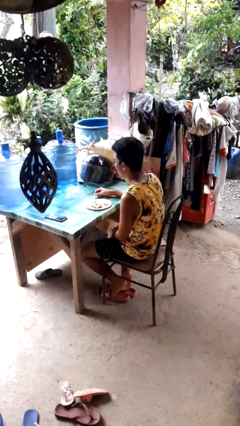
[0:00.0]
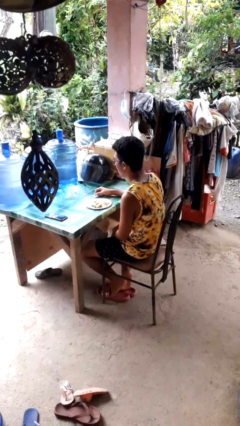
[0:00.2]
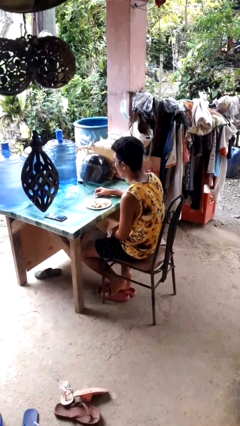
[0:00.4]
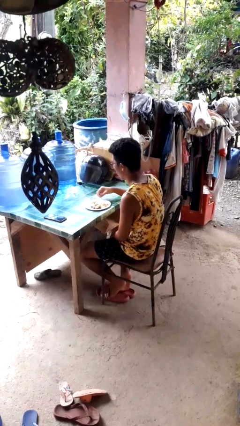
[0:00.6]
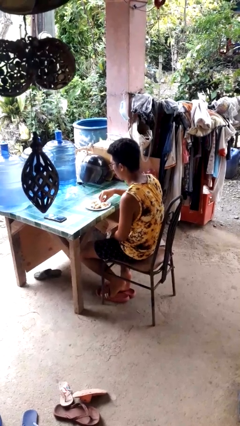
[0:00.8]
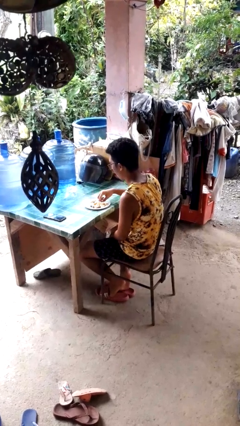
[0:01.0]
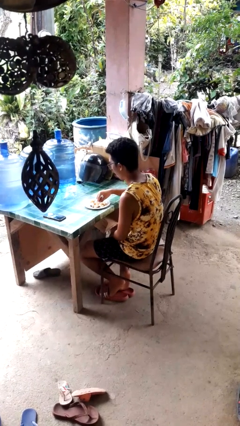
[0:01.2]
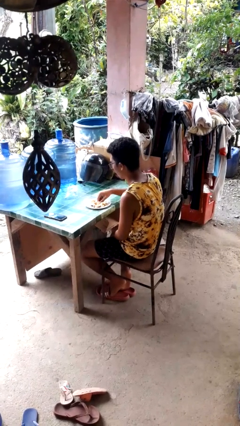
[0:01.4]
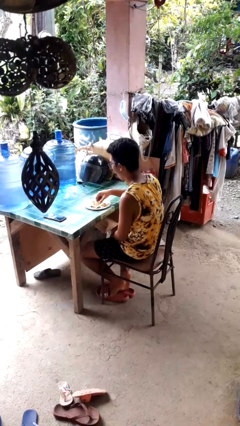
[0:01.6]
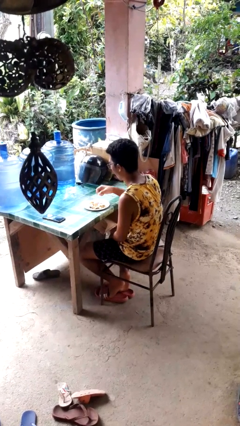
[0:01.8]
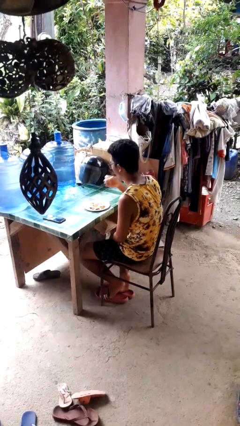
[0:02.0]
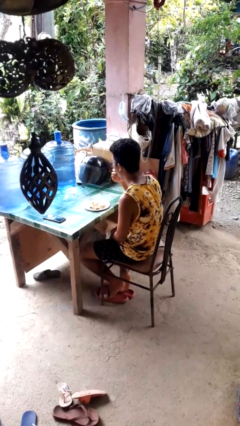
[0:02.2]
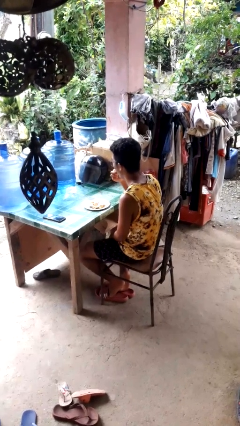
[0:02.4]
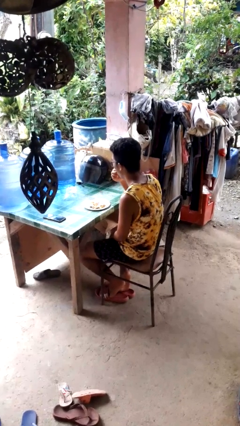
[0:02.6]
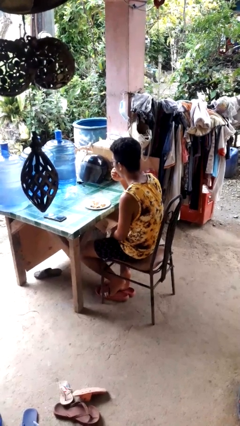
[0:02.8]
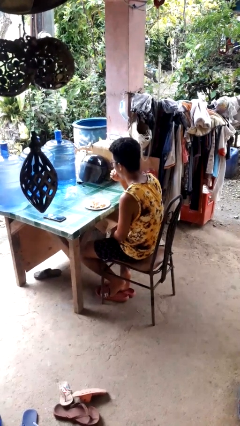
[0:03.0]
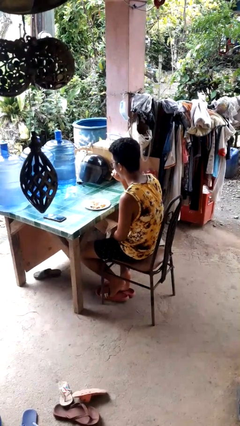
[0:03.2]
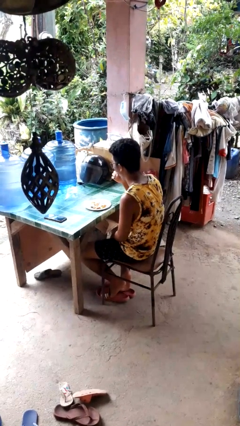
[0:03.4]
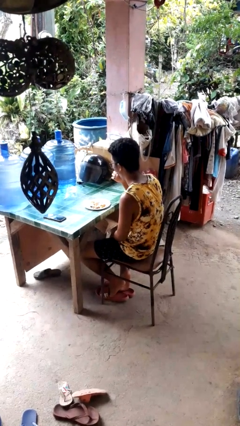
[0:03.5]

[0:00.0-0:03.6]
person eats with hands

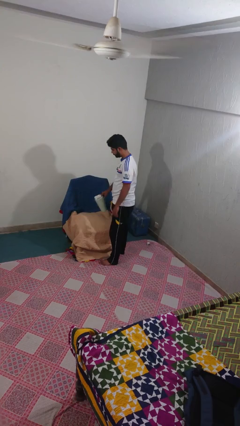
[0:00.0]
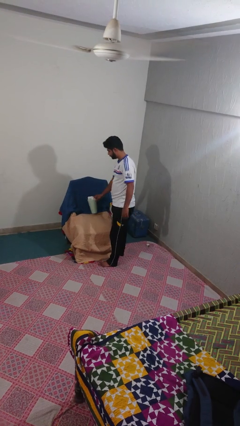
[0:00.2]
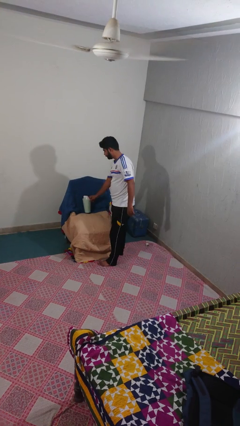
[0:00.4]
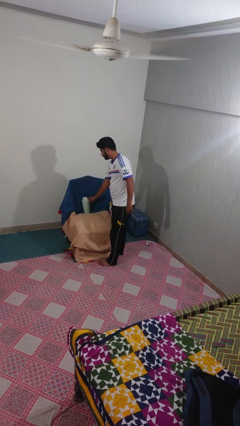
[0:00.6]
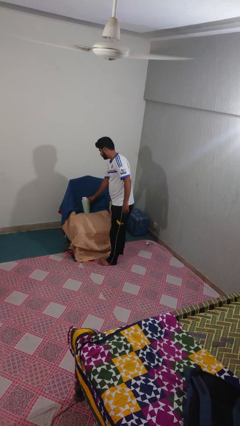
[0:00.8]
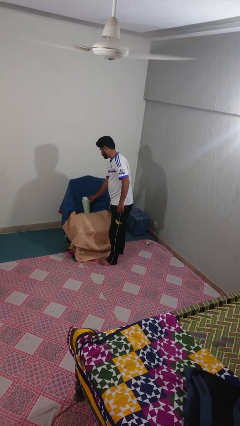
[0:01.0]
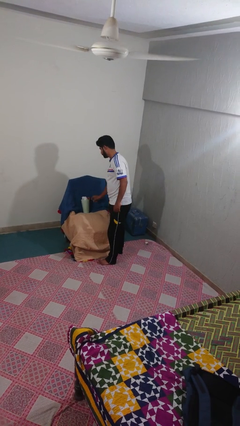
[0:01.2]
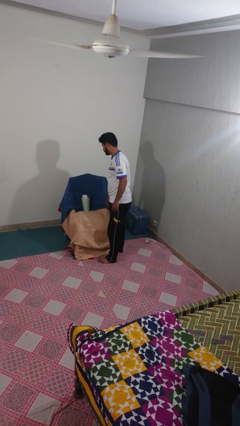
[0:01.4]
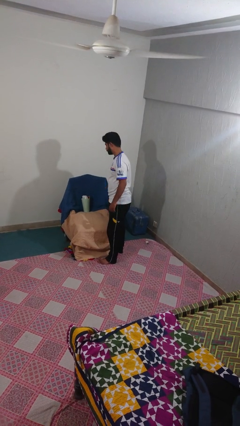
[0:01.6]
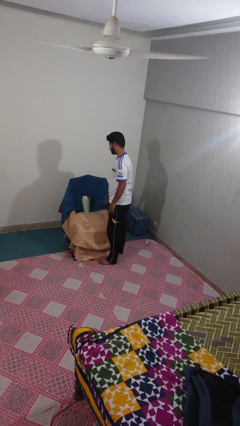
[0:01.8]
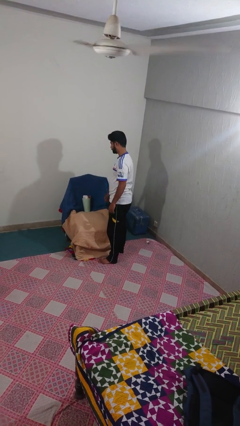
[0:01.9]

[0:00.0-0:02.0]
person puts down object on couch

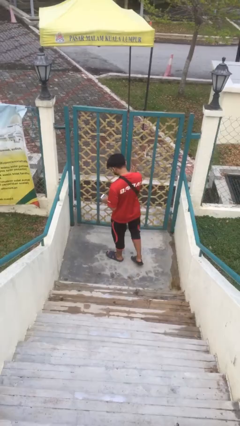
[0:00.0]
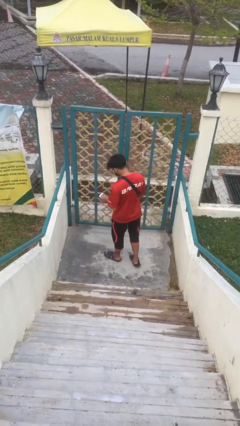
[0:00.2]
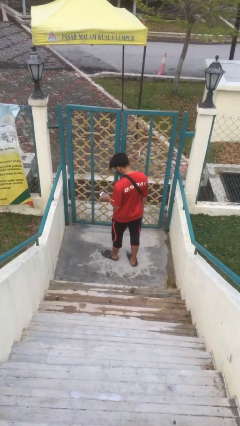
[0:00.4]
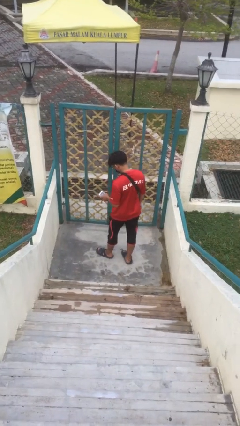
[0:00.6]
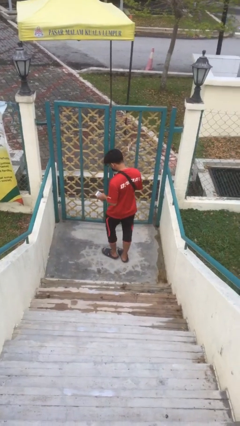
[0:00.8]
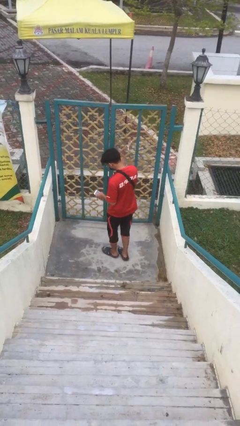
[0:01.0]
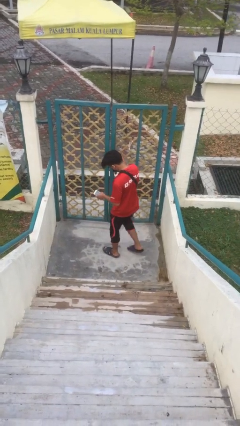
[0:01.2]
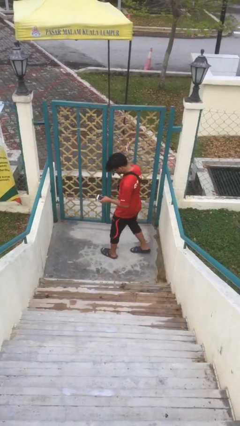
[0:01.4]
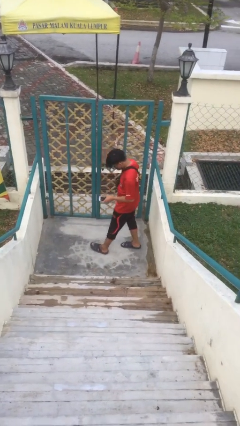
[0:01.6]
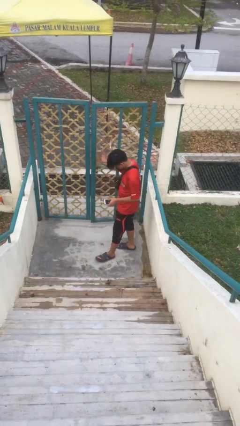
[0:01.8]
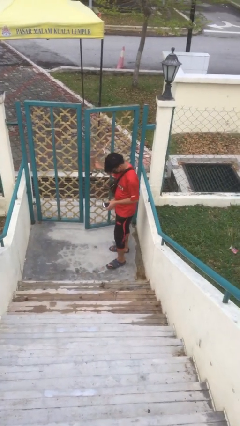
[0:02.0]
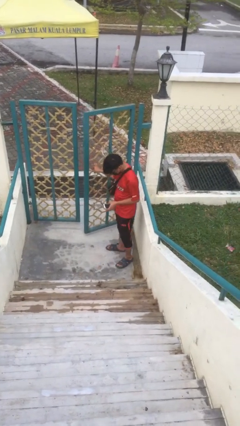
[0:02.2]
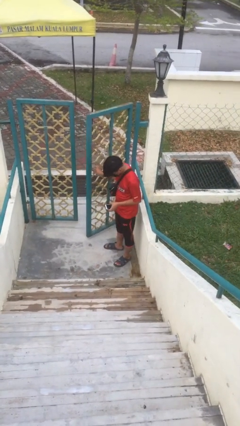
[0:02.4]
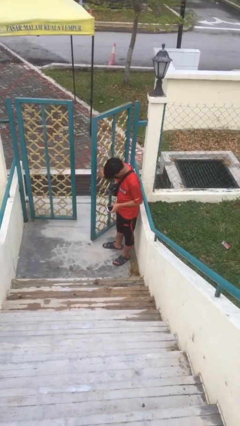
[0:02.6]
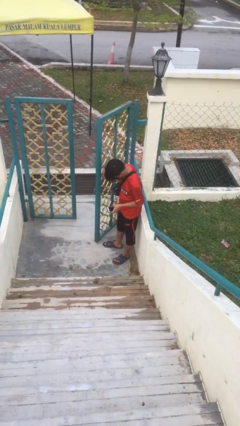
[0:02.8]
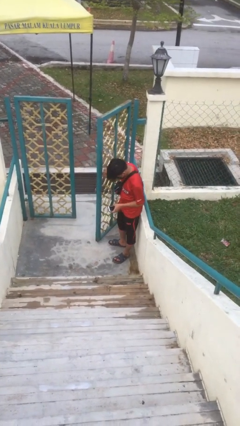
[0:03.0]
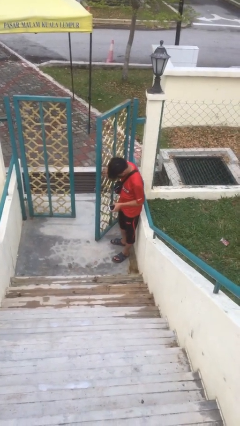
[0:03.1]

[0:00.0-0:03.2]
person opens facility door

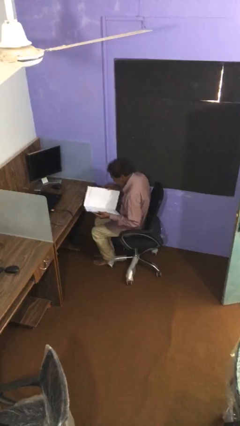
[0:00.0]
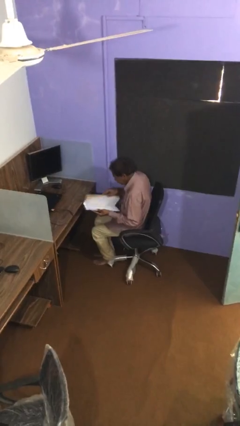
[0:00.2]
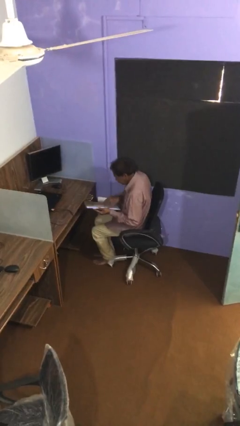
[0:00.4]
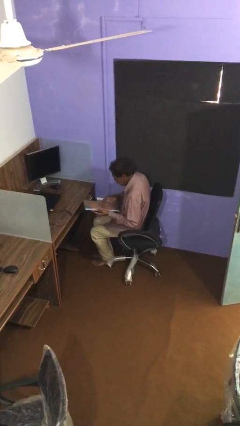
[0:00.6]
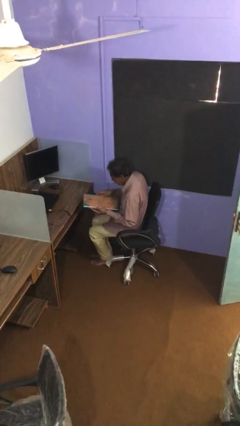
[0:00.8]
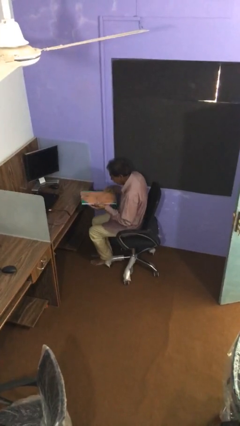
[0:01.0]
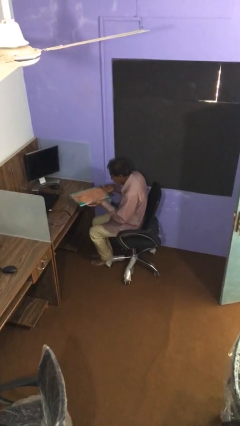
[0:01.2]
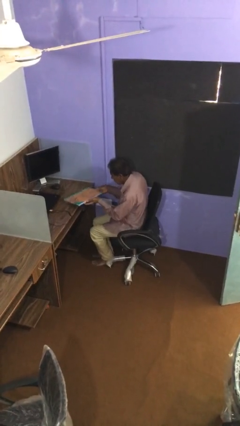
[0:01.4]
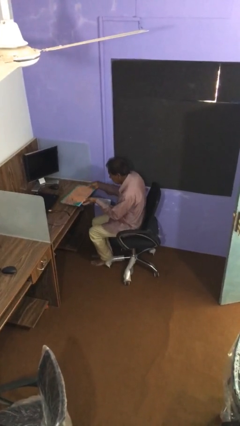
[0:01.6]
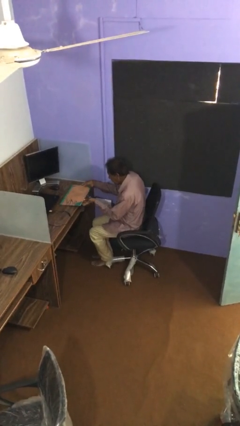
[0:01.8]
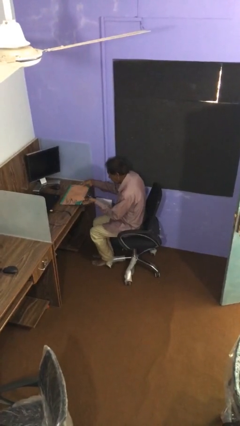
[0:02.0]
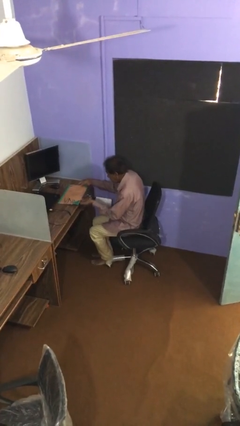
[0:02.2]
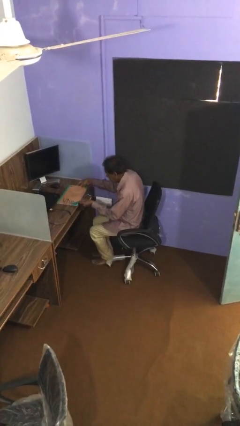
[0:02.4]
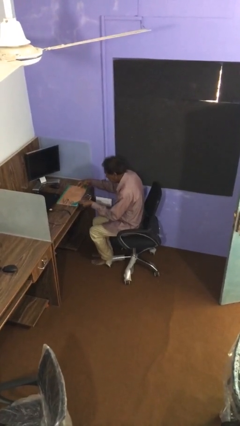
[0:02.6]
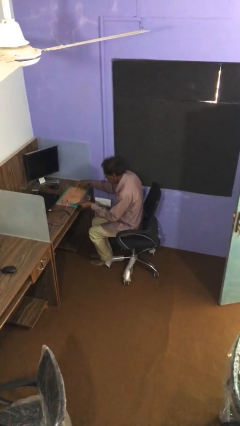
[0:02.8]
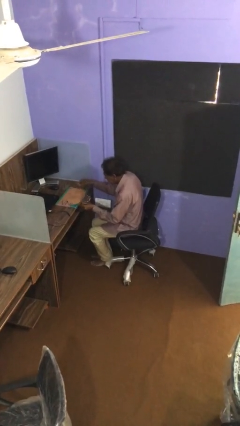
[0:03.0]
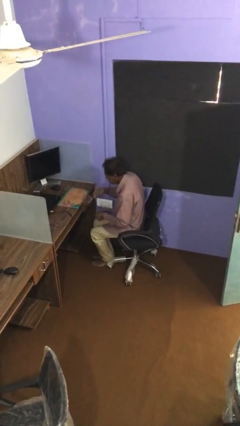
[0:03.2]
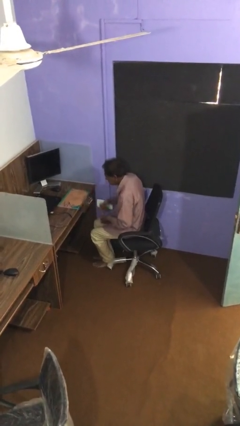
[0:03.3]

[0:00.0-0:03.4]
person puts down object on table

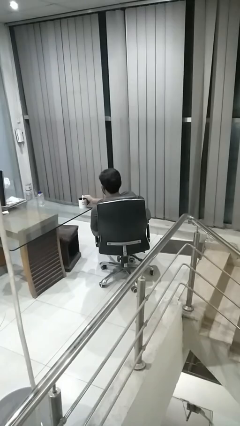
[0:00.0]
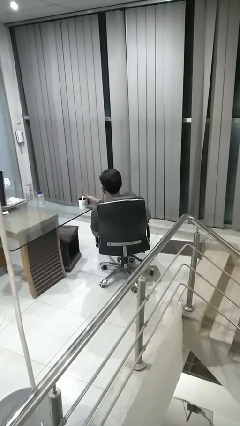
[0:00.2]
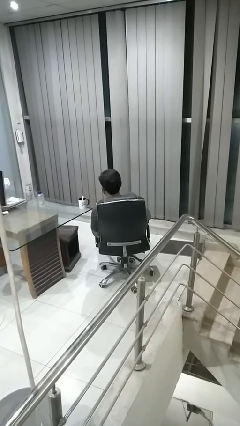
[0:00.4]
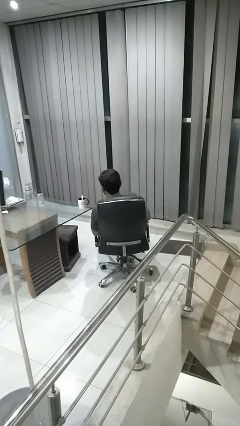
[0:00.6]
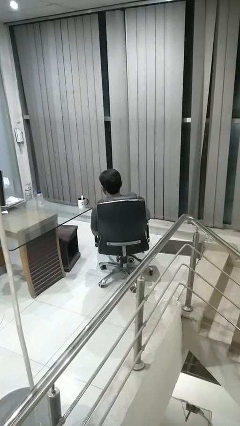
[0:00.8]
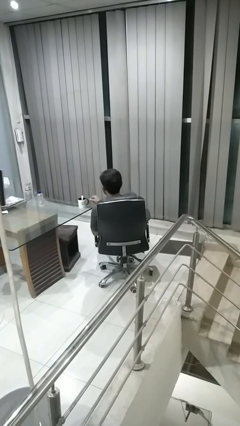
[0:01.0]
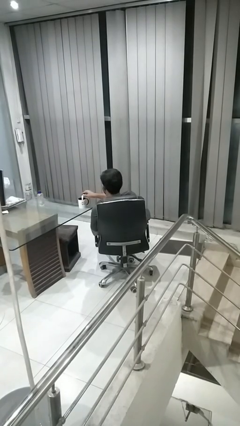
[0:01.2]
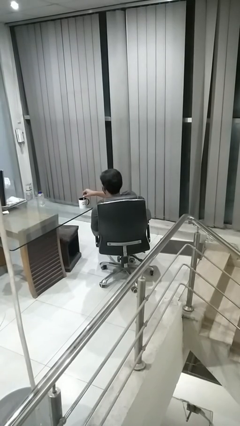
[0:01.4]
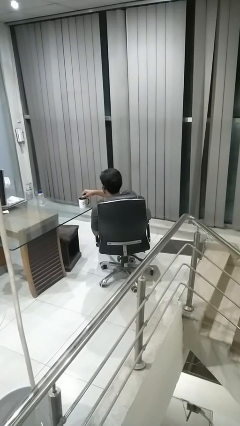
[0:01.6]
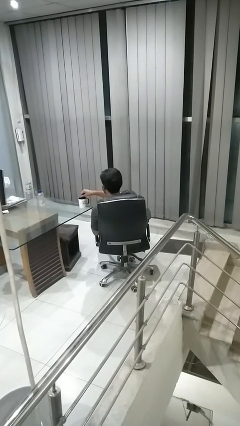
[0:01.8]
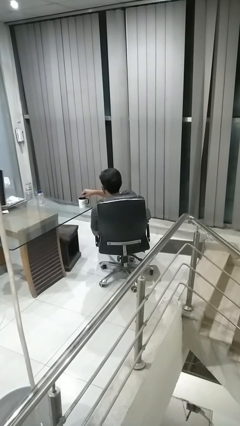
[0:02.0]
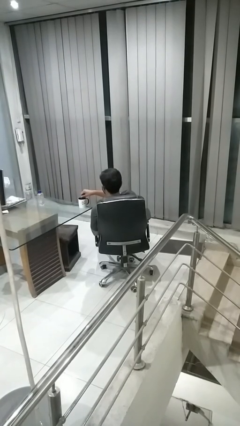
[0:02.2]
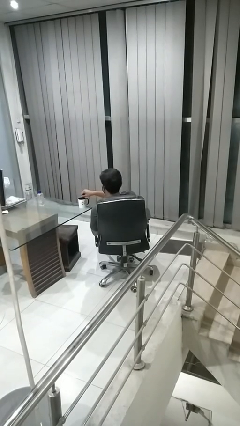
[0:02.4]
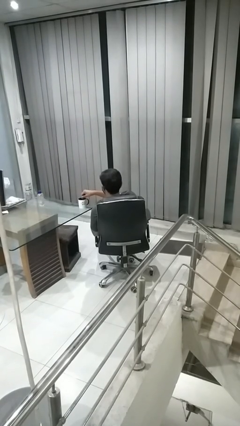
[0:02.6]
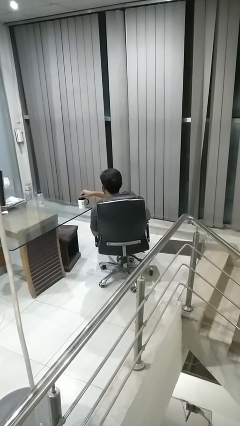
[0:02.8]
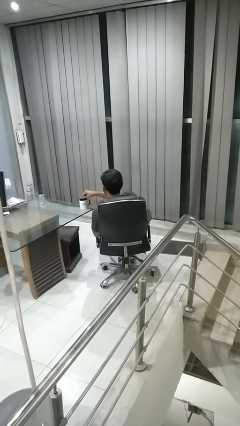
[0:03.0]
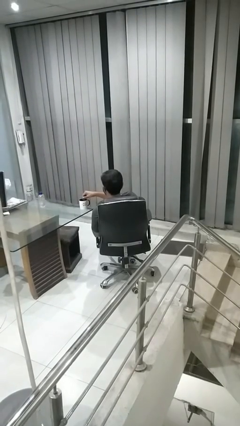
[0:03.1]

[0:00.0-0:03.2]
person stirs mug

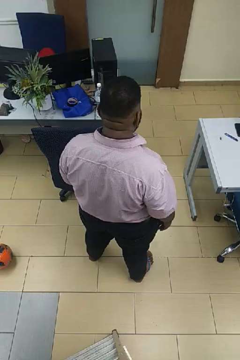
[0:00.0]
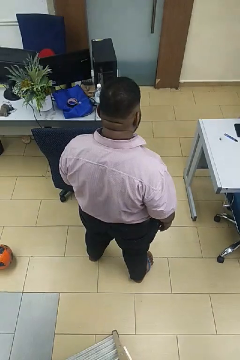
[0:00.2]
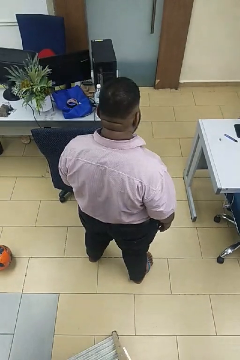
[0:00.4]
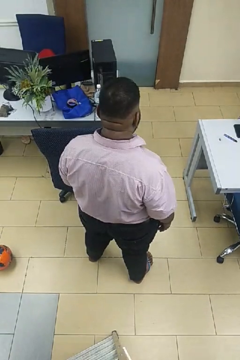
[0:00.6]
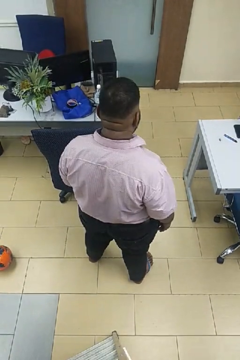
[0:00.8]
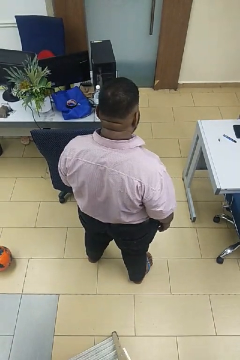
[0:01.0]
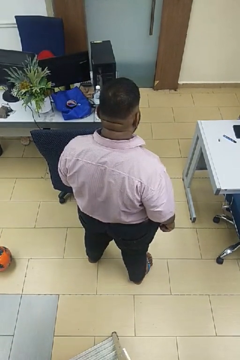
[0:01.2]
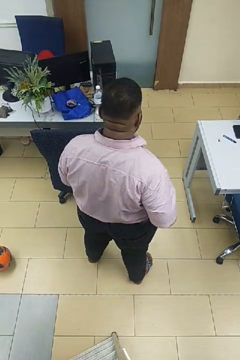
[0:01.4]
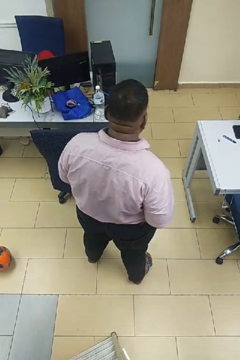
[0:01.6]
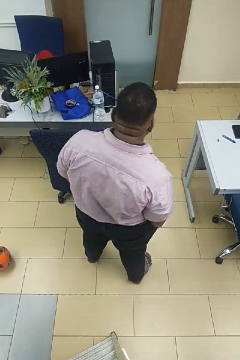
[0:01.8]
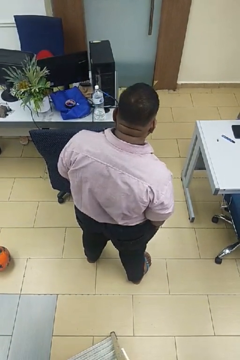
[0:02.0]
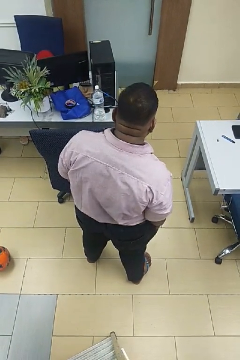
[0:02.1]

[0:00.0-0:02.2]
person puts hands in back pockets
